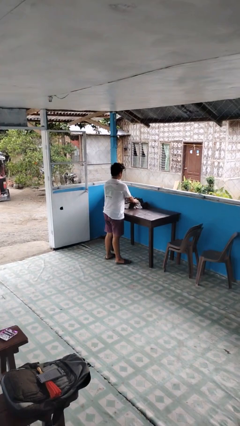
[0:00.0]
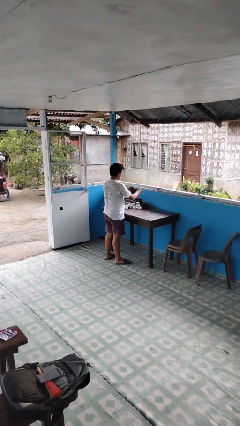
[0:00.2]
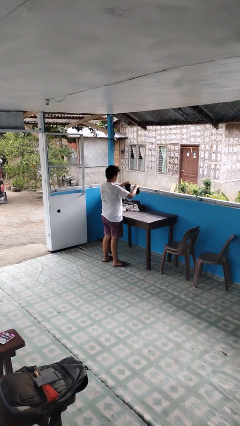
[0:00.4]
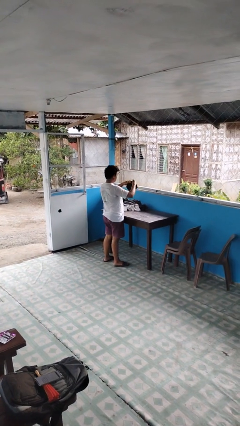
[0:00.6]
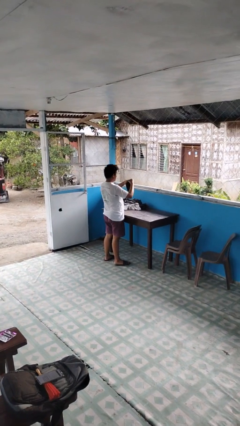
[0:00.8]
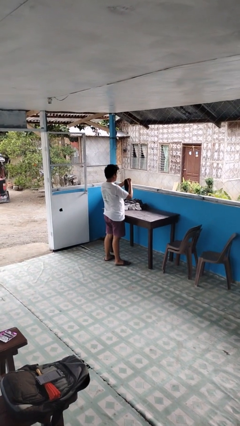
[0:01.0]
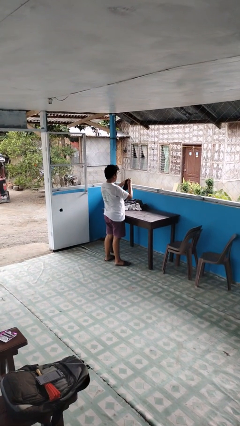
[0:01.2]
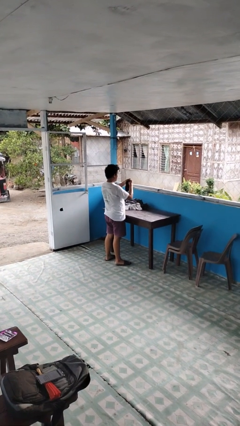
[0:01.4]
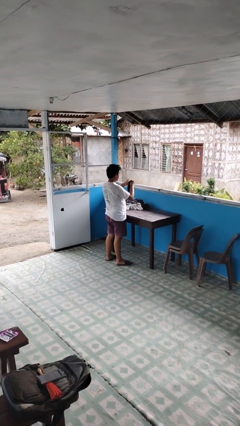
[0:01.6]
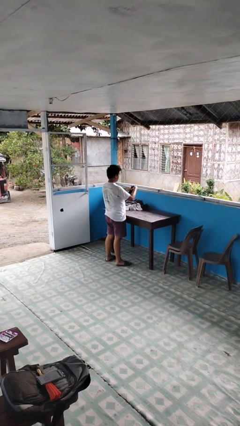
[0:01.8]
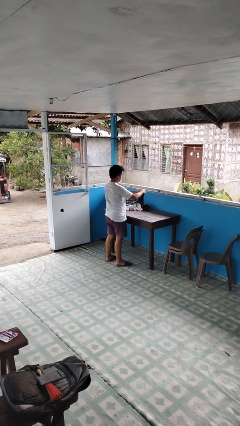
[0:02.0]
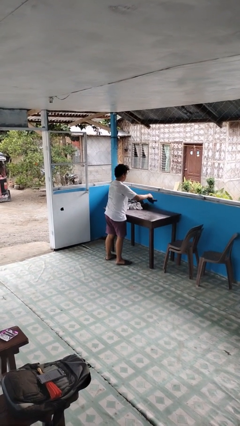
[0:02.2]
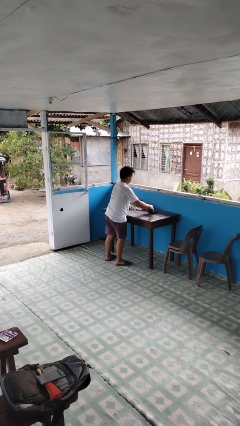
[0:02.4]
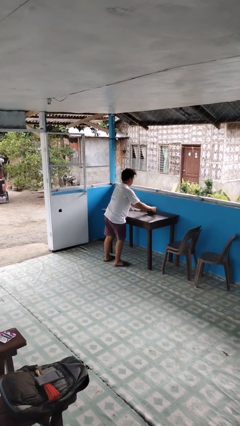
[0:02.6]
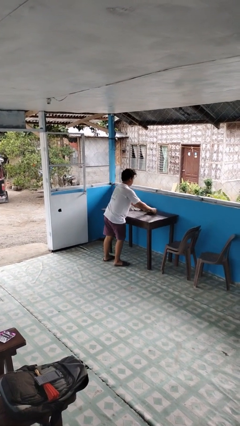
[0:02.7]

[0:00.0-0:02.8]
person folds socks

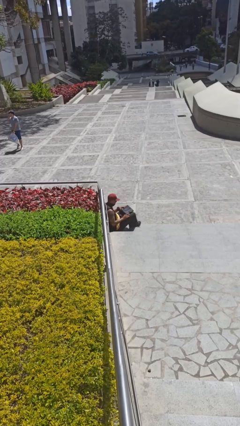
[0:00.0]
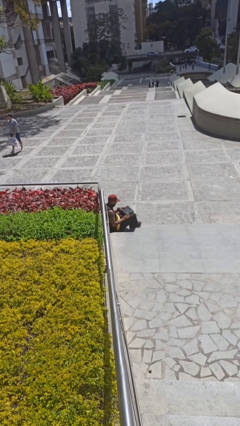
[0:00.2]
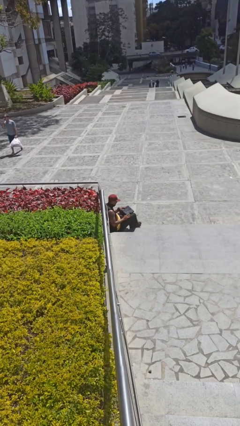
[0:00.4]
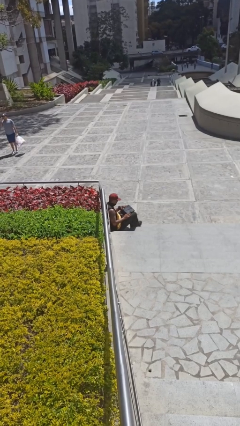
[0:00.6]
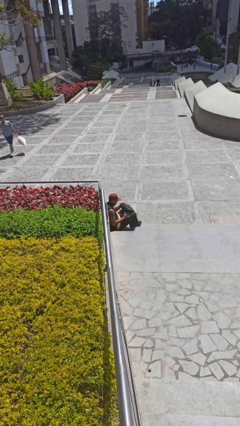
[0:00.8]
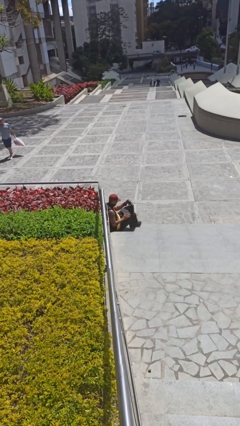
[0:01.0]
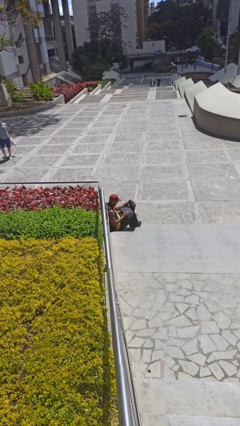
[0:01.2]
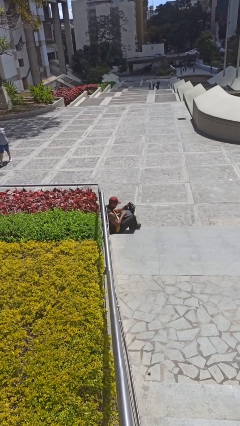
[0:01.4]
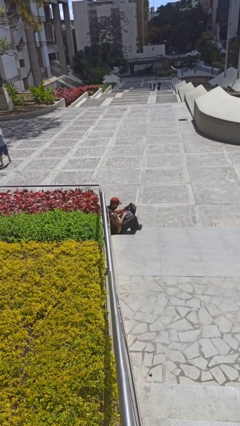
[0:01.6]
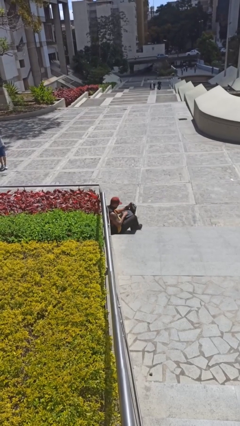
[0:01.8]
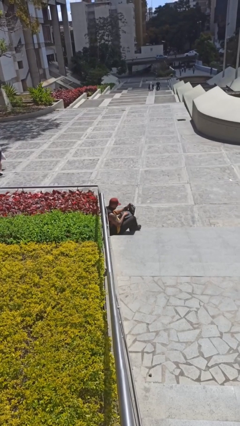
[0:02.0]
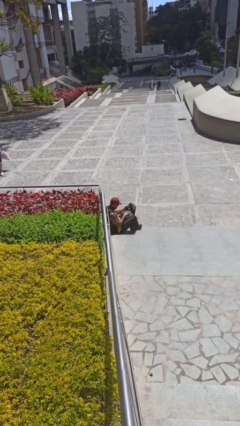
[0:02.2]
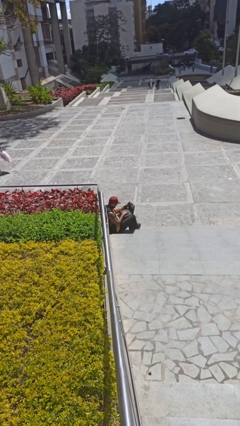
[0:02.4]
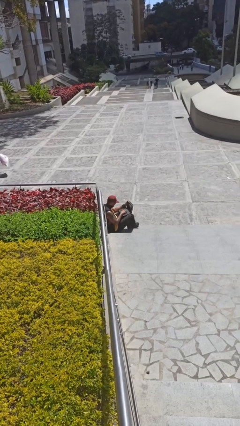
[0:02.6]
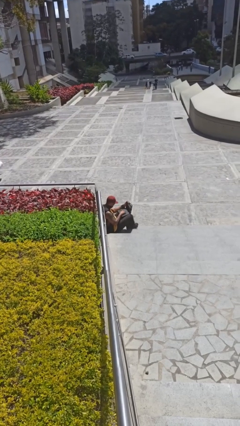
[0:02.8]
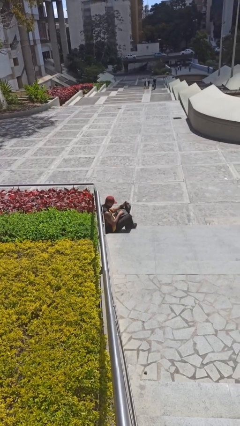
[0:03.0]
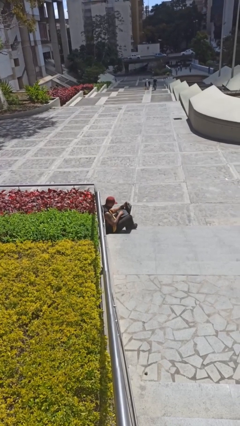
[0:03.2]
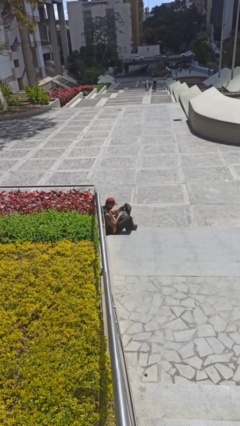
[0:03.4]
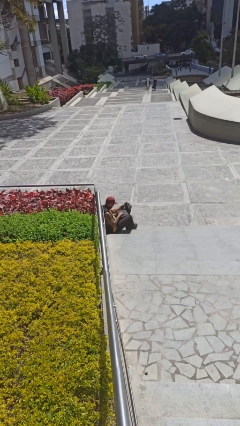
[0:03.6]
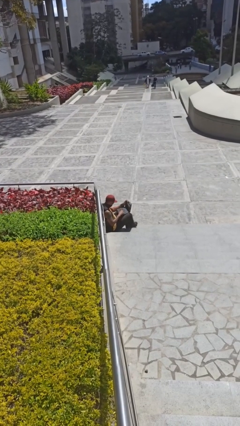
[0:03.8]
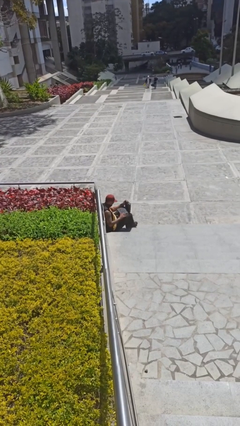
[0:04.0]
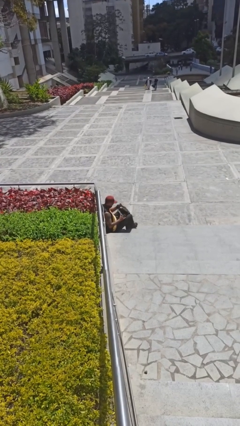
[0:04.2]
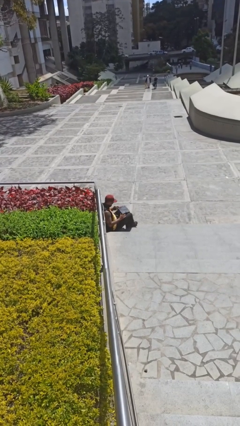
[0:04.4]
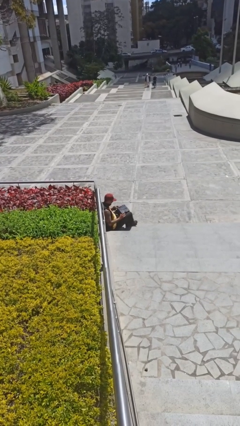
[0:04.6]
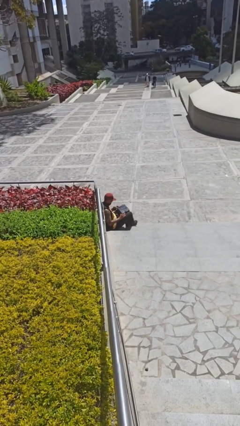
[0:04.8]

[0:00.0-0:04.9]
person interacts with laptop

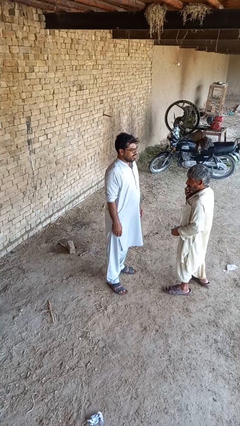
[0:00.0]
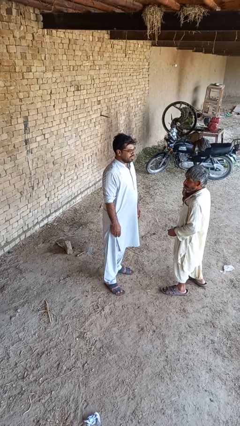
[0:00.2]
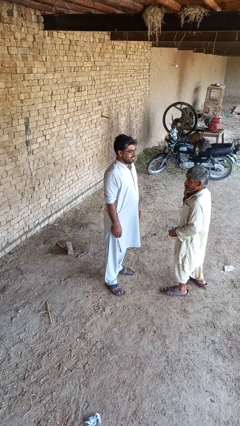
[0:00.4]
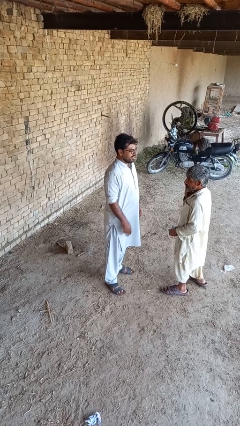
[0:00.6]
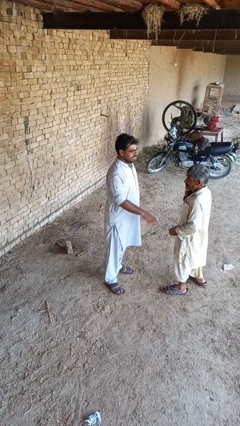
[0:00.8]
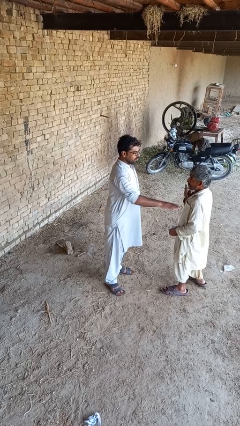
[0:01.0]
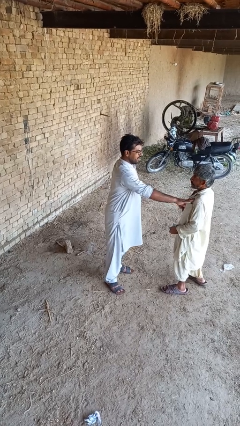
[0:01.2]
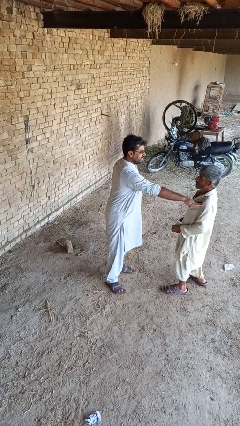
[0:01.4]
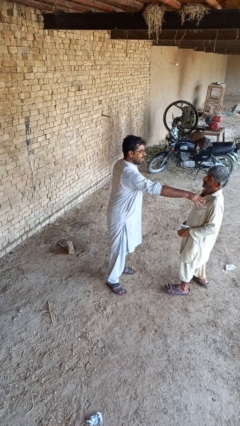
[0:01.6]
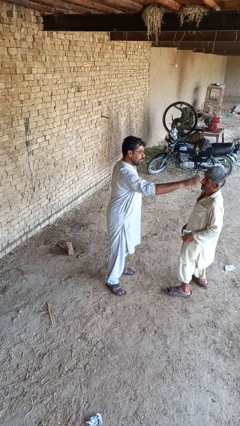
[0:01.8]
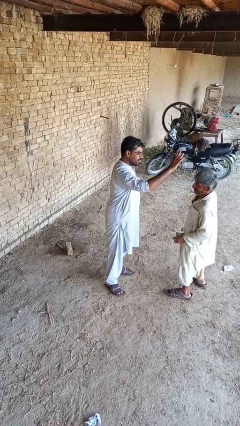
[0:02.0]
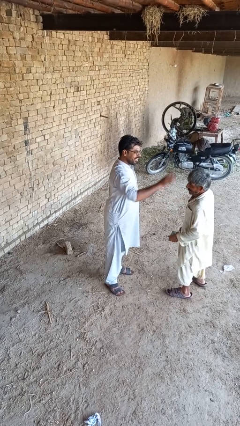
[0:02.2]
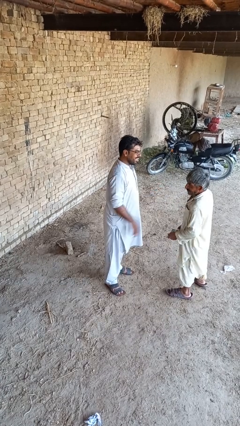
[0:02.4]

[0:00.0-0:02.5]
person shoves person

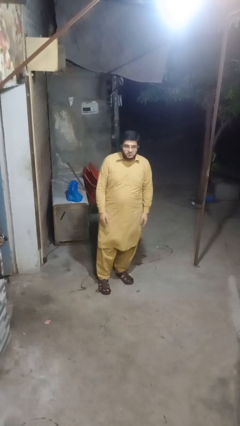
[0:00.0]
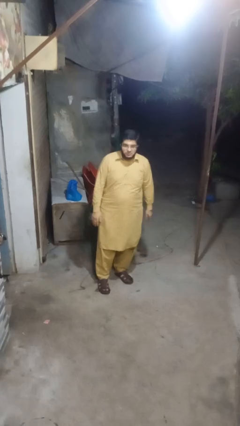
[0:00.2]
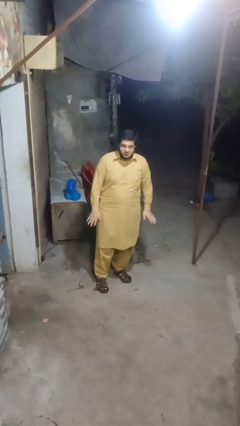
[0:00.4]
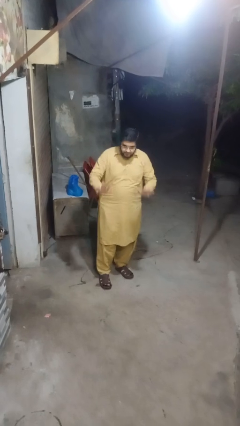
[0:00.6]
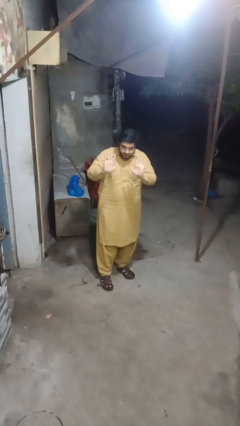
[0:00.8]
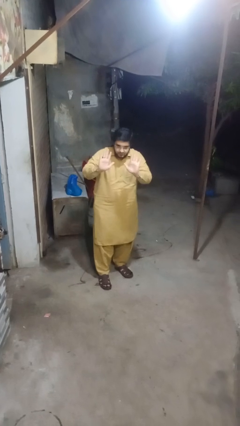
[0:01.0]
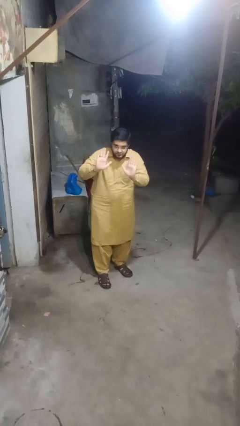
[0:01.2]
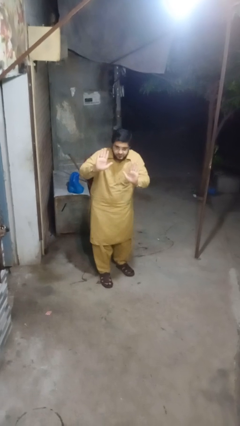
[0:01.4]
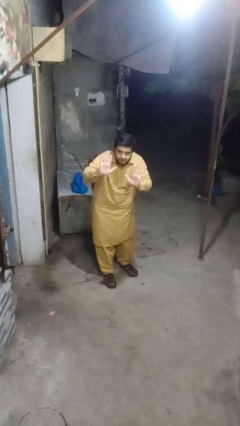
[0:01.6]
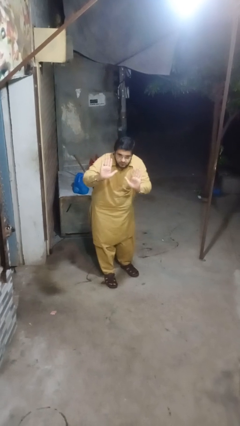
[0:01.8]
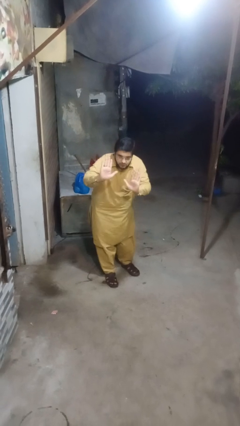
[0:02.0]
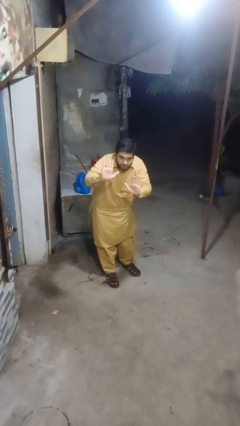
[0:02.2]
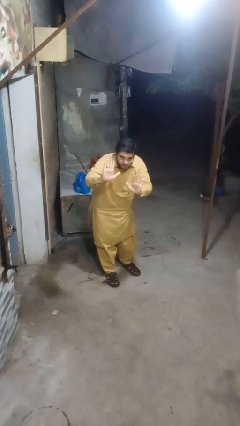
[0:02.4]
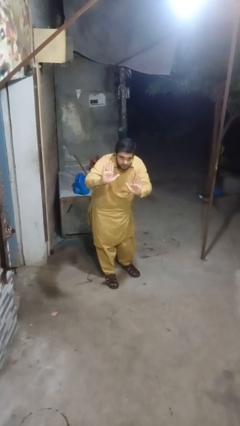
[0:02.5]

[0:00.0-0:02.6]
person gestures stop

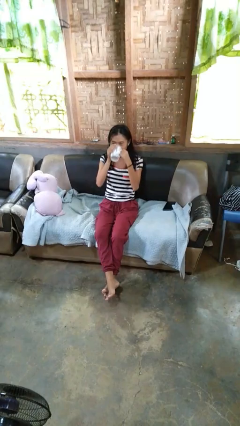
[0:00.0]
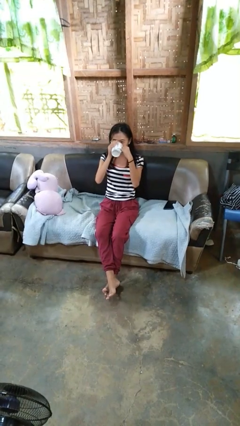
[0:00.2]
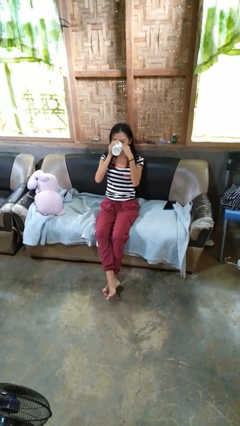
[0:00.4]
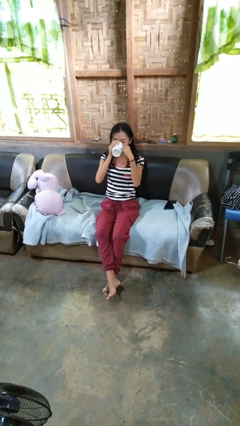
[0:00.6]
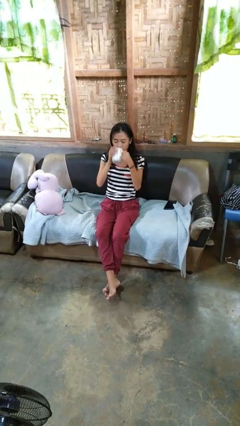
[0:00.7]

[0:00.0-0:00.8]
person drinks from mug

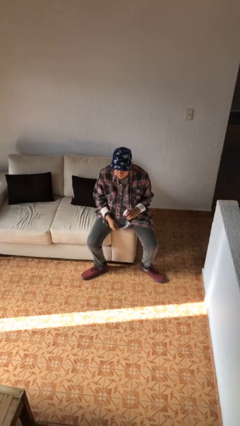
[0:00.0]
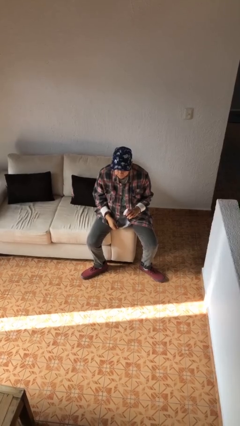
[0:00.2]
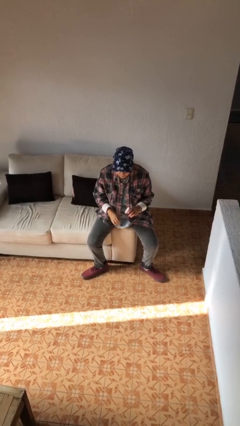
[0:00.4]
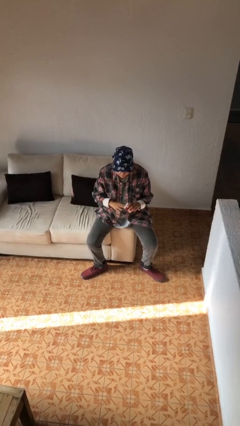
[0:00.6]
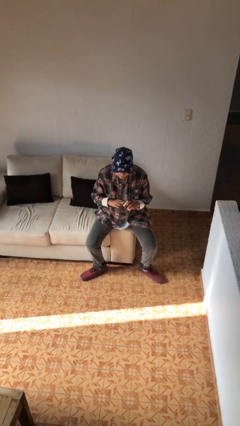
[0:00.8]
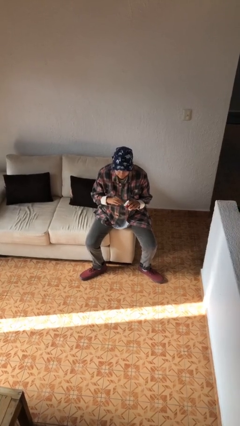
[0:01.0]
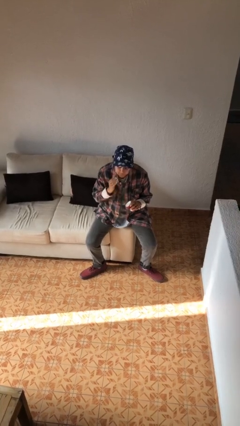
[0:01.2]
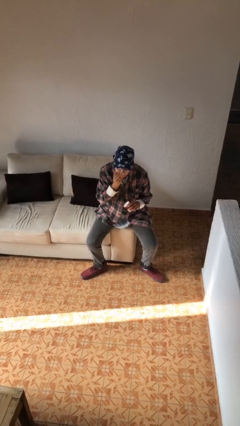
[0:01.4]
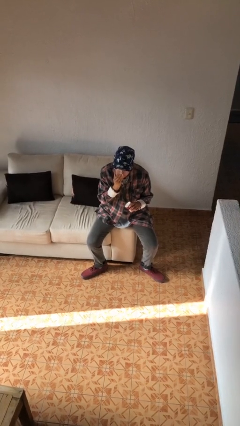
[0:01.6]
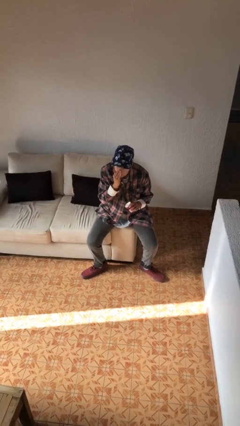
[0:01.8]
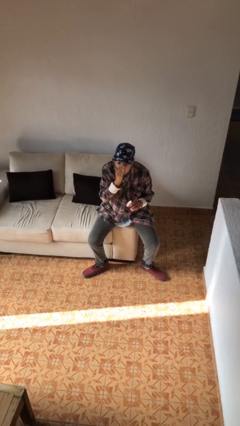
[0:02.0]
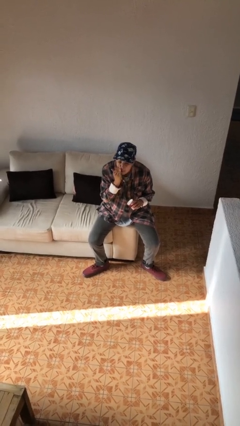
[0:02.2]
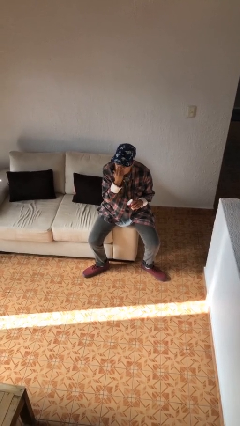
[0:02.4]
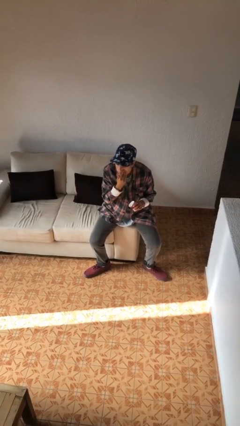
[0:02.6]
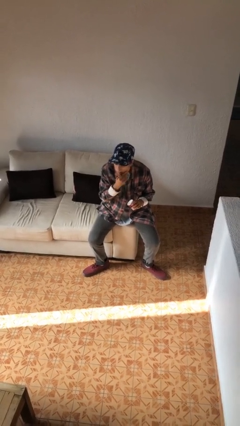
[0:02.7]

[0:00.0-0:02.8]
person applies facial moisturizer

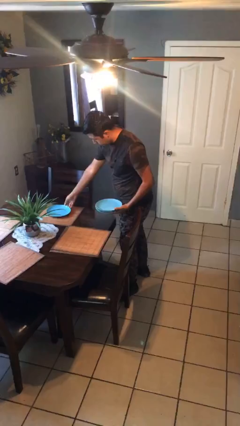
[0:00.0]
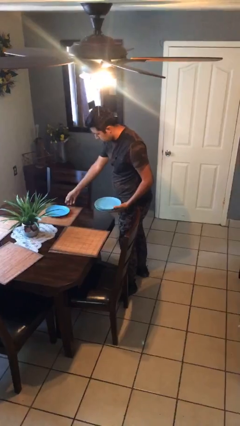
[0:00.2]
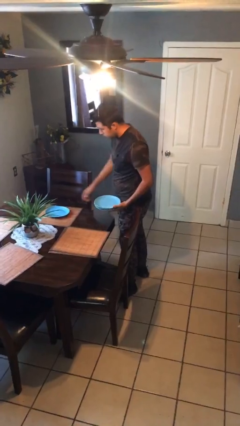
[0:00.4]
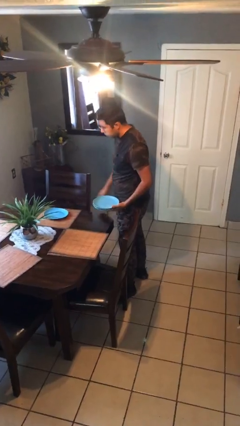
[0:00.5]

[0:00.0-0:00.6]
person sets table

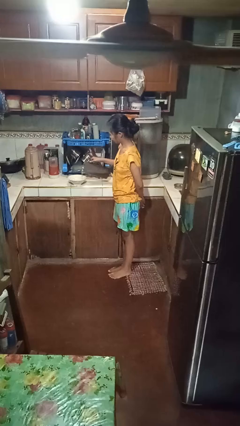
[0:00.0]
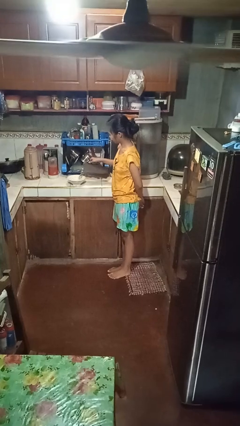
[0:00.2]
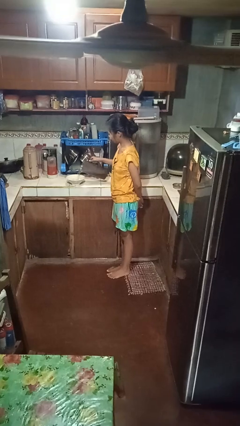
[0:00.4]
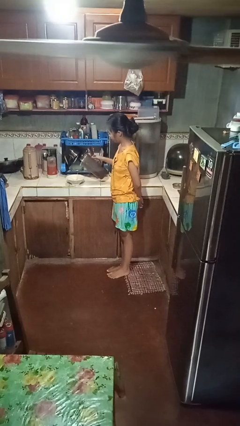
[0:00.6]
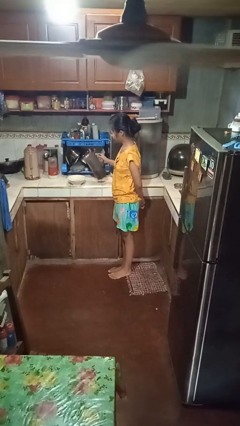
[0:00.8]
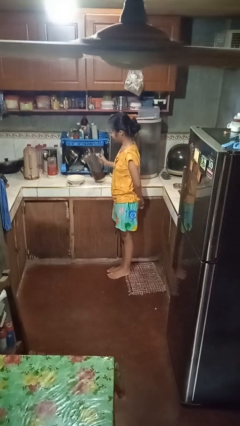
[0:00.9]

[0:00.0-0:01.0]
person pours into bowl
